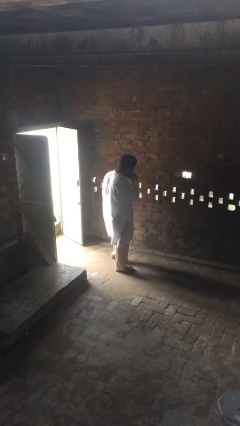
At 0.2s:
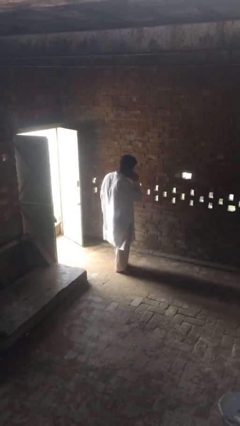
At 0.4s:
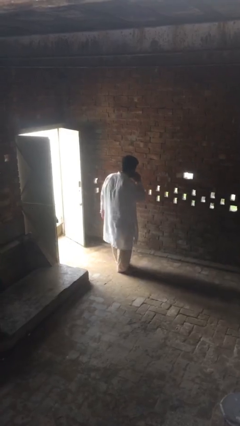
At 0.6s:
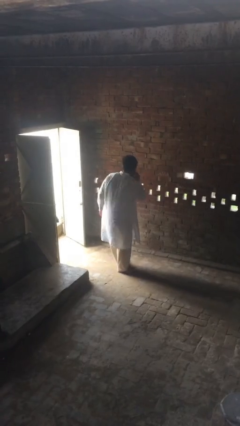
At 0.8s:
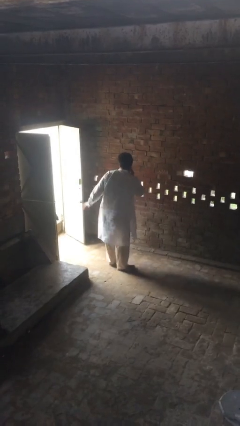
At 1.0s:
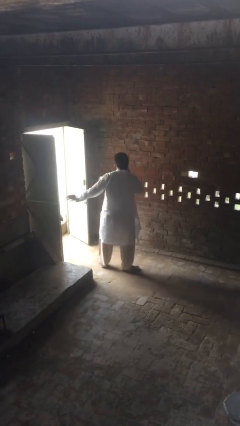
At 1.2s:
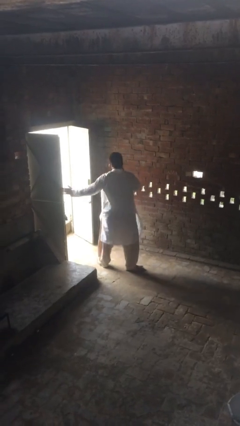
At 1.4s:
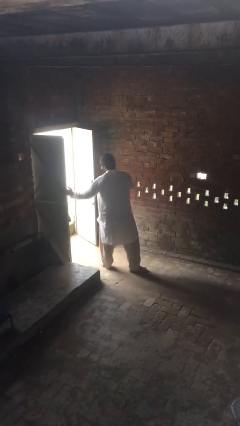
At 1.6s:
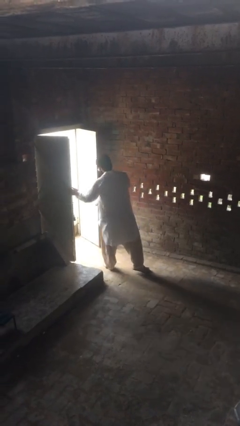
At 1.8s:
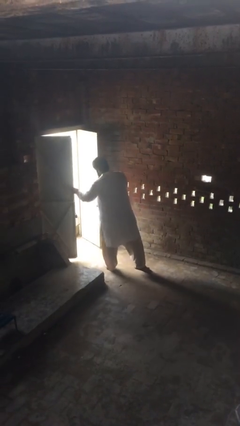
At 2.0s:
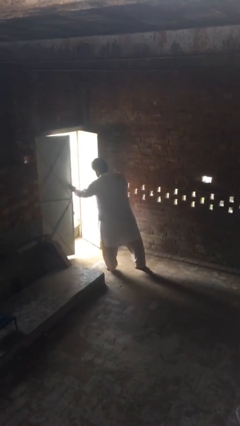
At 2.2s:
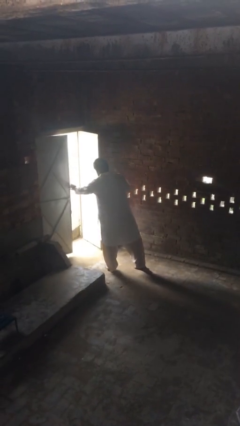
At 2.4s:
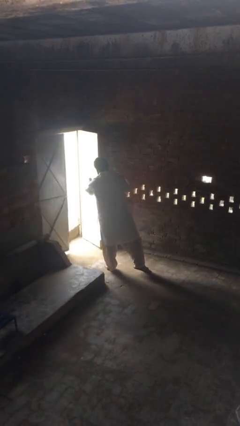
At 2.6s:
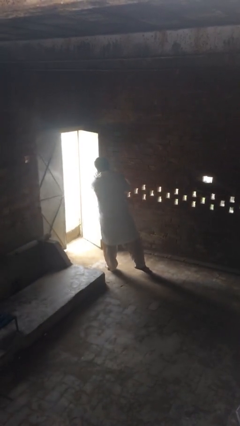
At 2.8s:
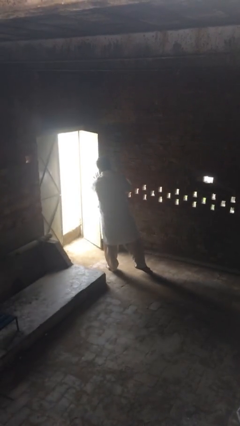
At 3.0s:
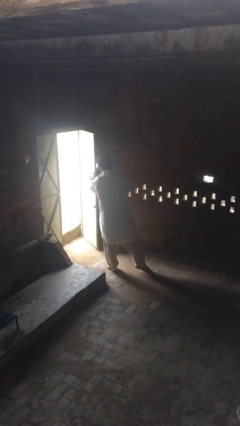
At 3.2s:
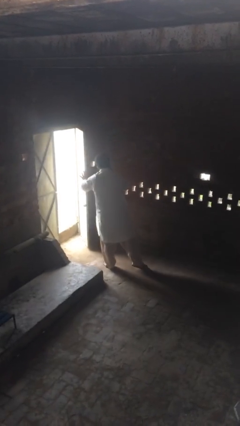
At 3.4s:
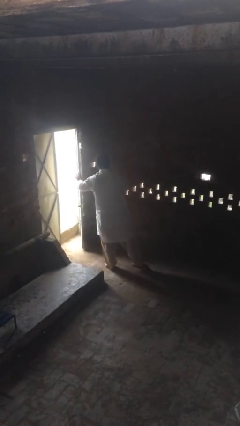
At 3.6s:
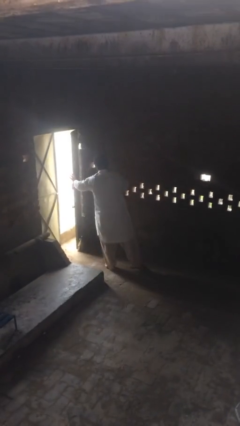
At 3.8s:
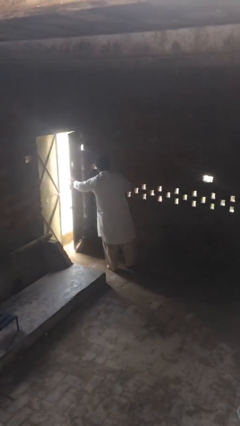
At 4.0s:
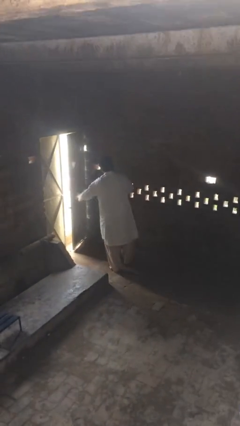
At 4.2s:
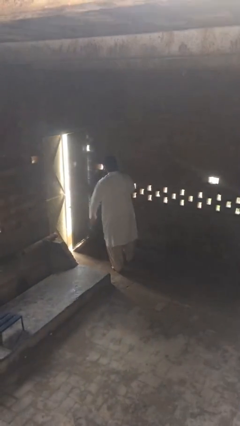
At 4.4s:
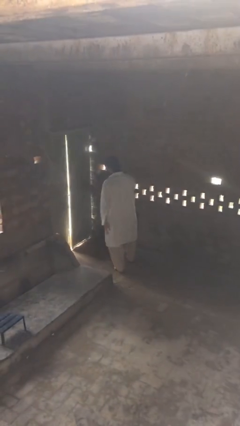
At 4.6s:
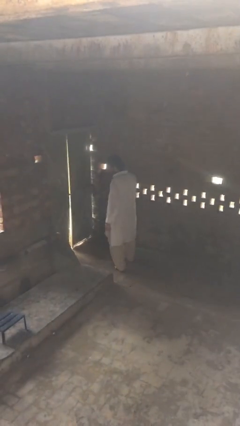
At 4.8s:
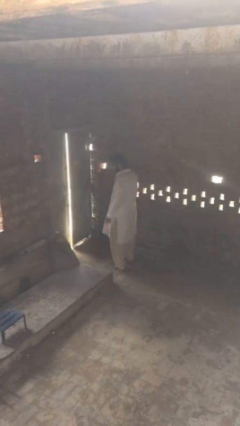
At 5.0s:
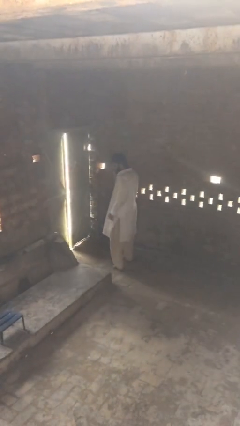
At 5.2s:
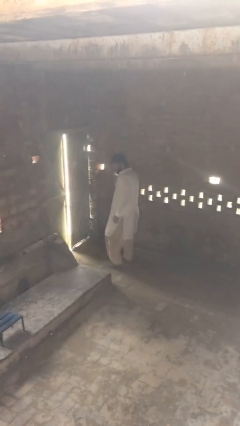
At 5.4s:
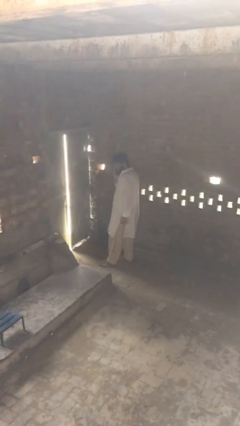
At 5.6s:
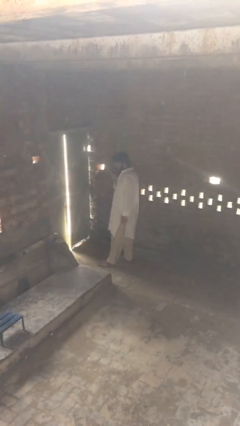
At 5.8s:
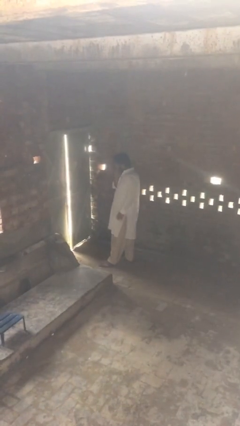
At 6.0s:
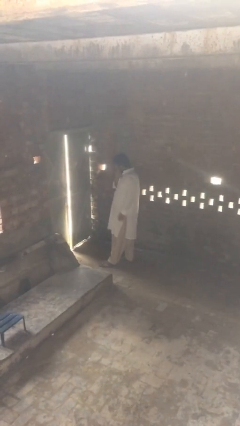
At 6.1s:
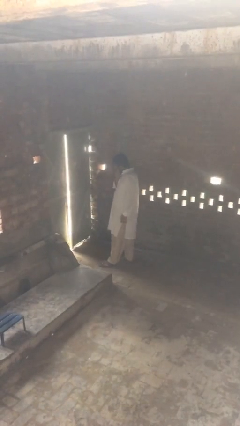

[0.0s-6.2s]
person closes facility door

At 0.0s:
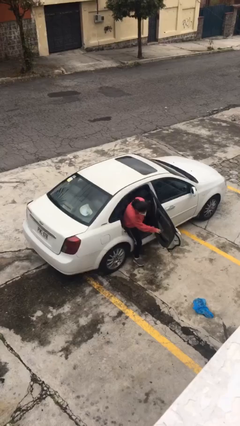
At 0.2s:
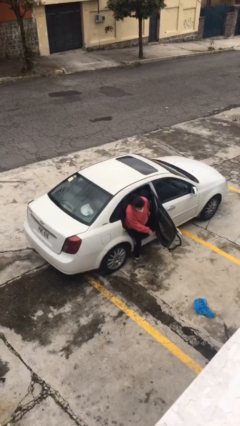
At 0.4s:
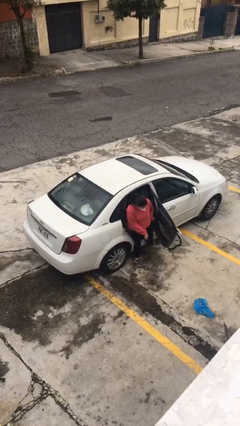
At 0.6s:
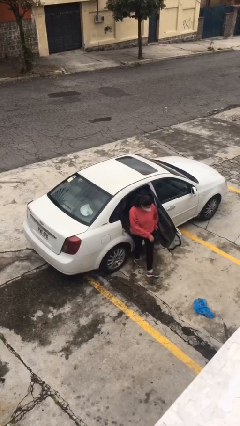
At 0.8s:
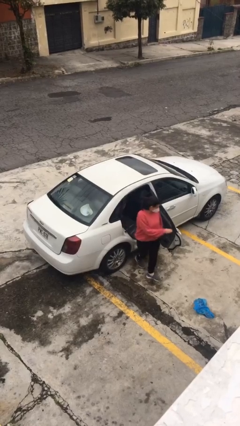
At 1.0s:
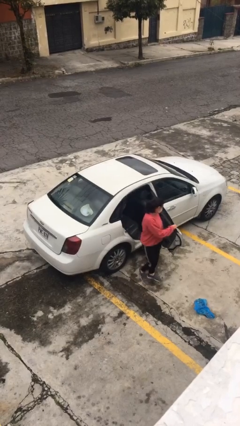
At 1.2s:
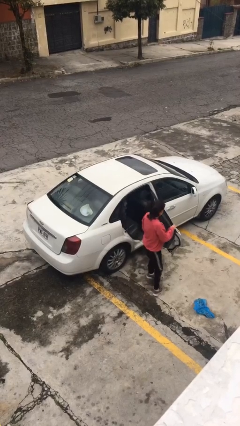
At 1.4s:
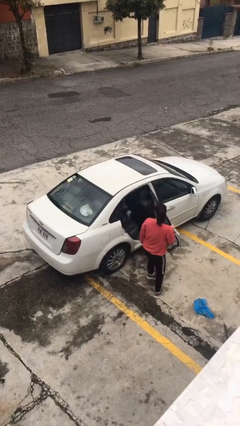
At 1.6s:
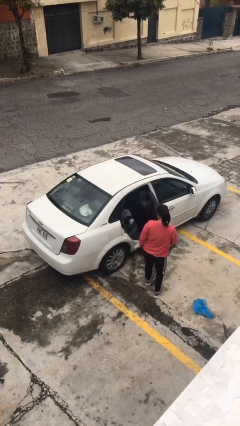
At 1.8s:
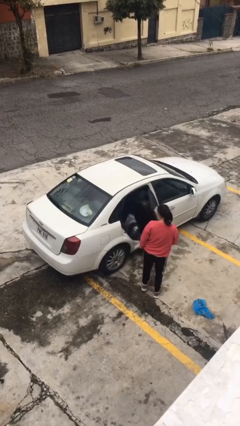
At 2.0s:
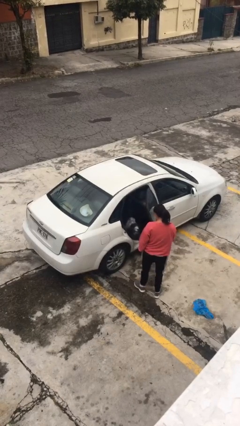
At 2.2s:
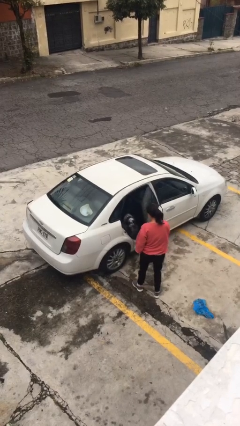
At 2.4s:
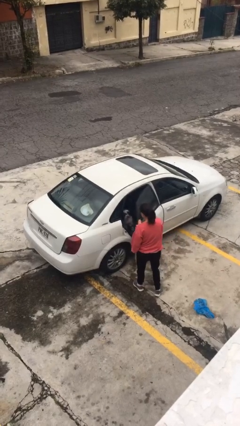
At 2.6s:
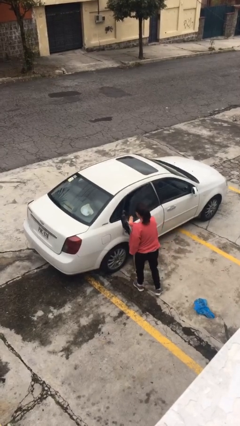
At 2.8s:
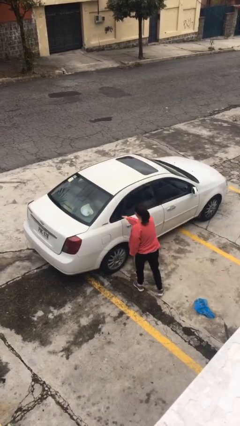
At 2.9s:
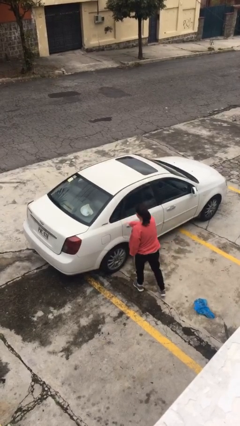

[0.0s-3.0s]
car drops off person

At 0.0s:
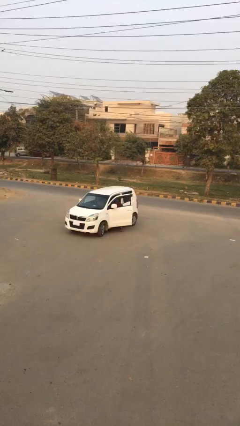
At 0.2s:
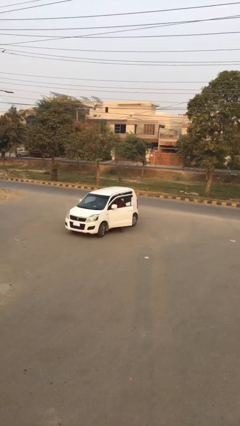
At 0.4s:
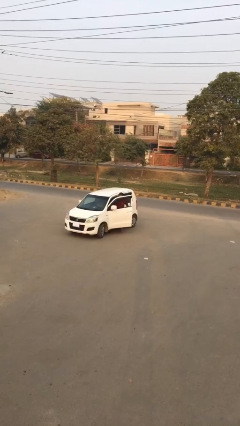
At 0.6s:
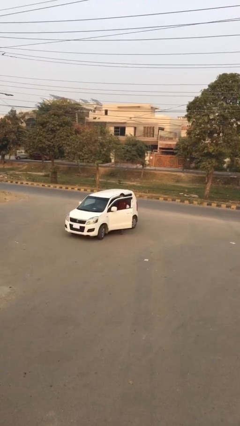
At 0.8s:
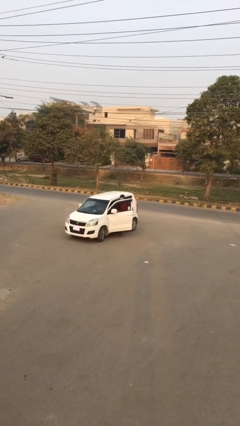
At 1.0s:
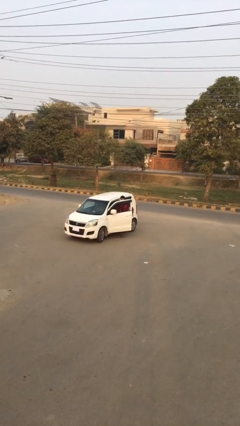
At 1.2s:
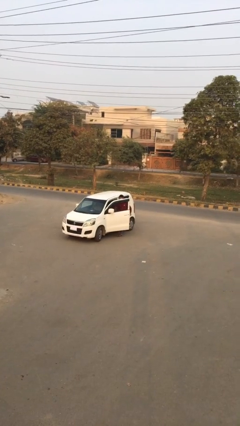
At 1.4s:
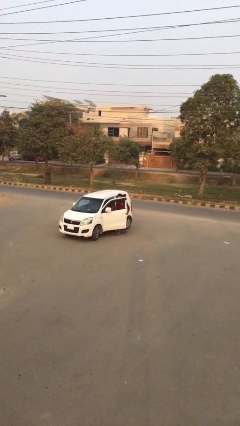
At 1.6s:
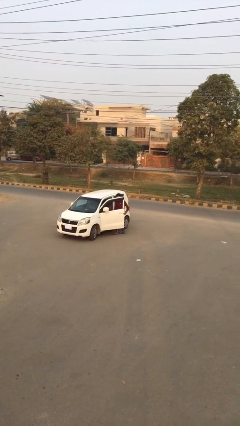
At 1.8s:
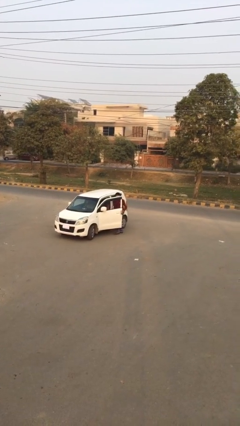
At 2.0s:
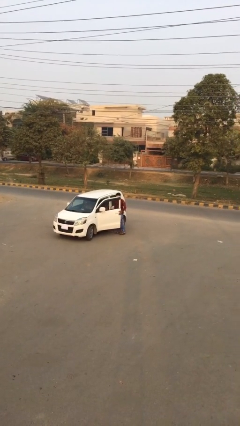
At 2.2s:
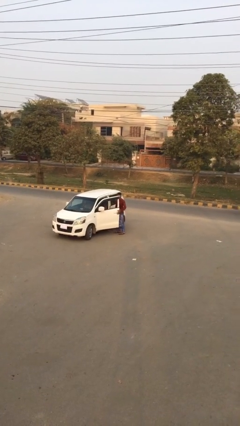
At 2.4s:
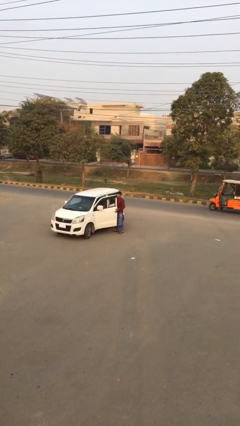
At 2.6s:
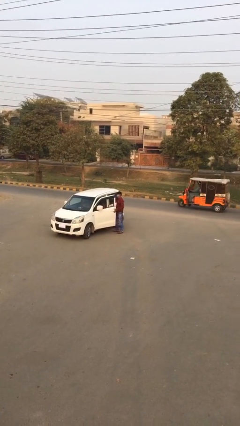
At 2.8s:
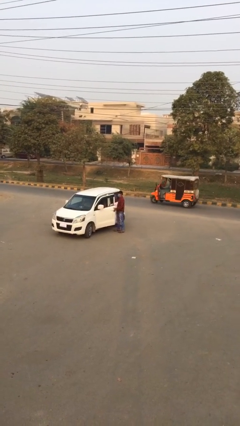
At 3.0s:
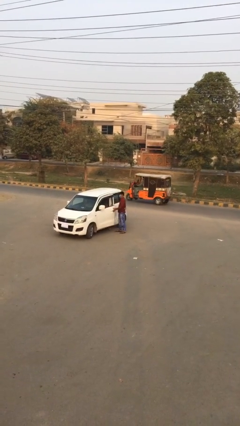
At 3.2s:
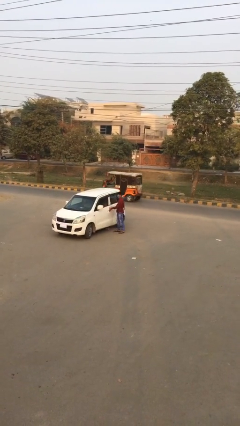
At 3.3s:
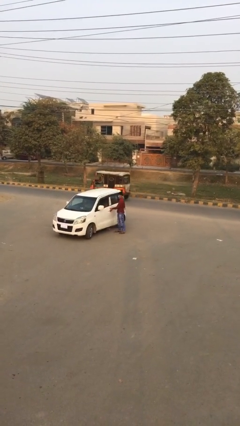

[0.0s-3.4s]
person exits car

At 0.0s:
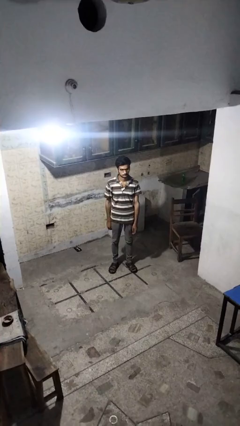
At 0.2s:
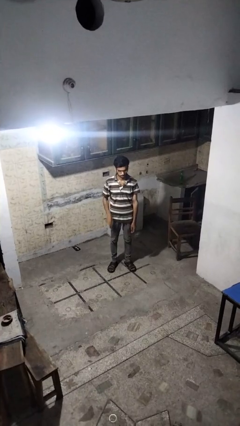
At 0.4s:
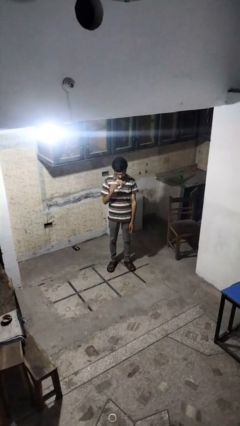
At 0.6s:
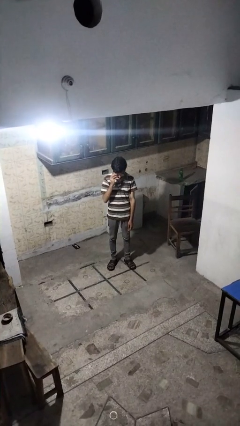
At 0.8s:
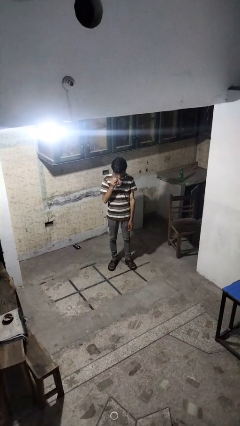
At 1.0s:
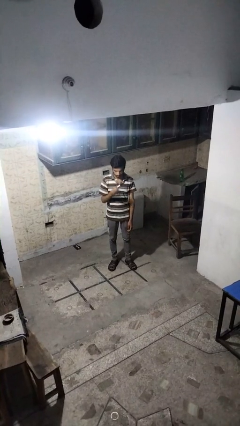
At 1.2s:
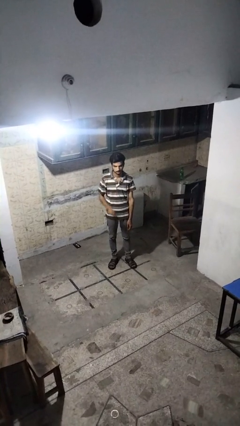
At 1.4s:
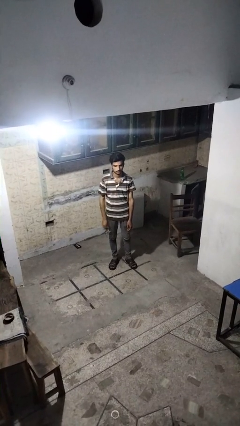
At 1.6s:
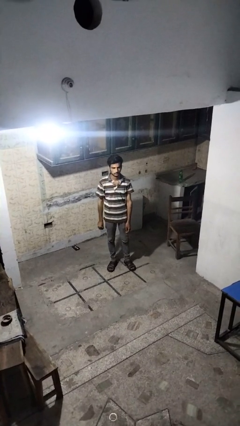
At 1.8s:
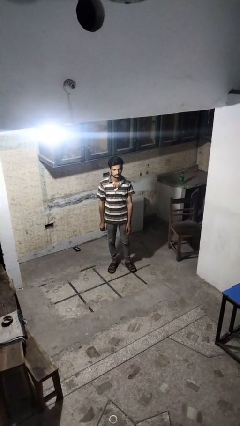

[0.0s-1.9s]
person takes off glasses

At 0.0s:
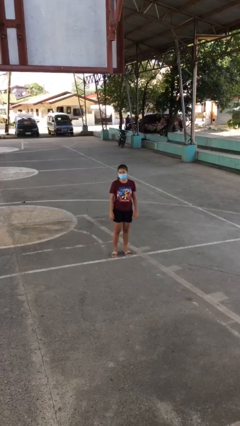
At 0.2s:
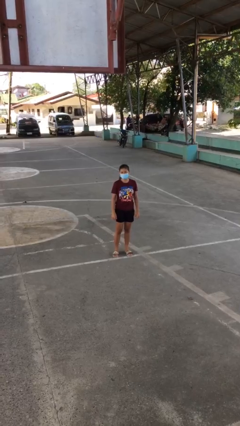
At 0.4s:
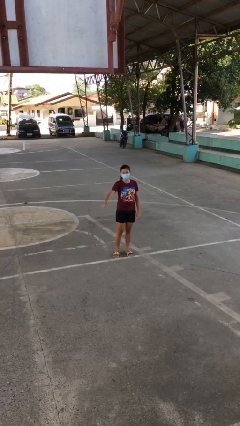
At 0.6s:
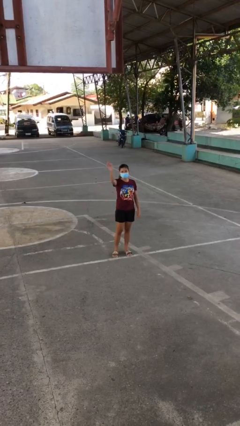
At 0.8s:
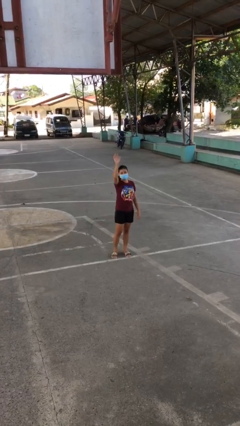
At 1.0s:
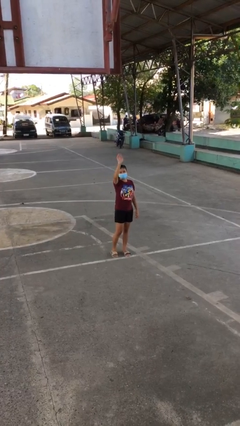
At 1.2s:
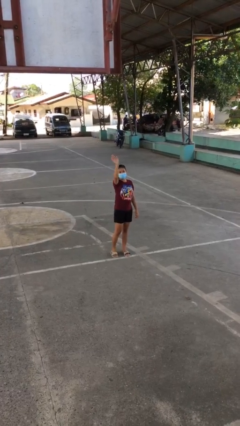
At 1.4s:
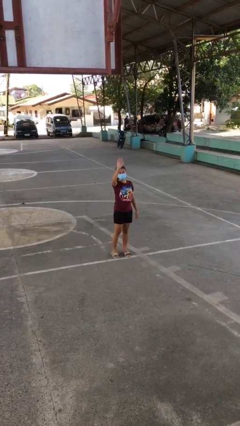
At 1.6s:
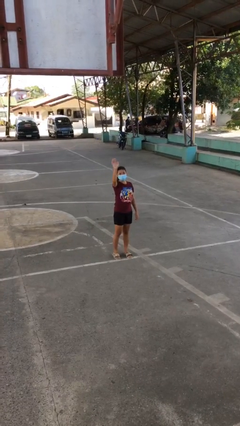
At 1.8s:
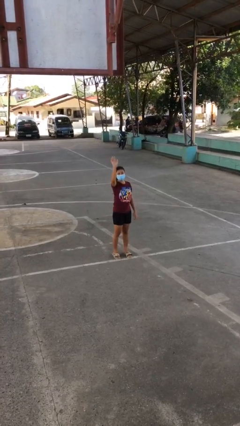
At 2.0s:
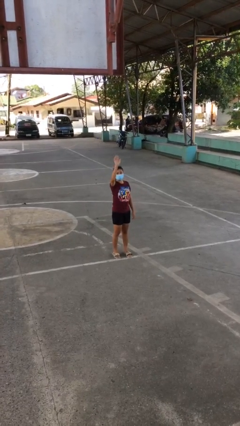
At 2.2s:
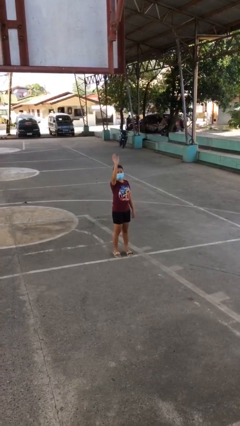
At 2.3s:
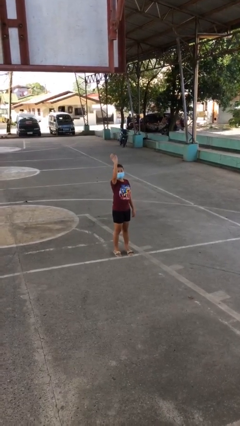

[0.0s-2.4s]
person waves at person

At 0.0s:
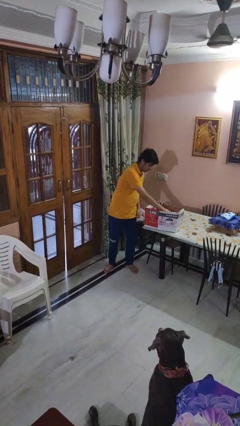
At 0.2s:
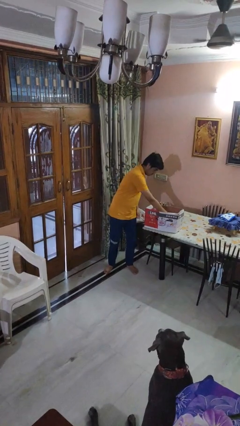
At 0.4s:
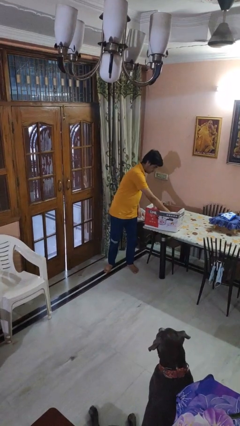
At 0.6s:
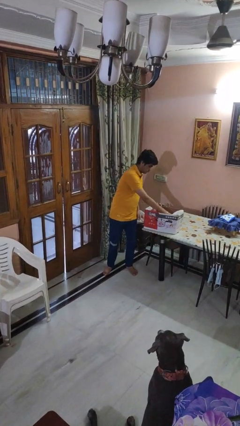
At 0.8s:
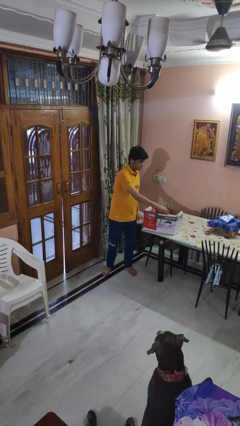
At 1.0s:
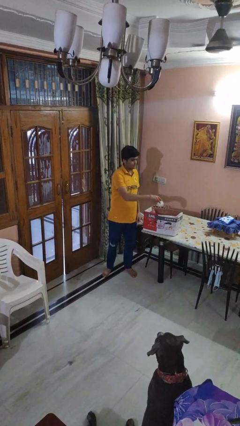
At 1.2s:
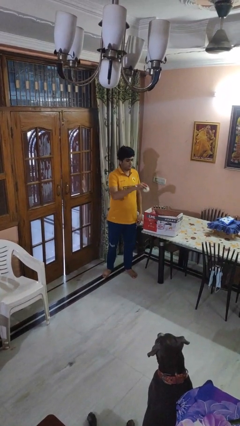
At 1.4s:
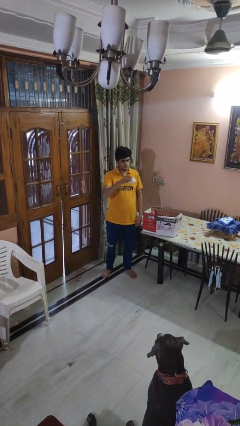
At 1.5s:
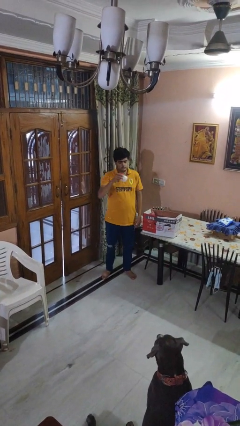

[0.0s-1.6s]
person takes object from box
